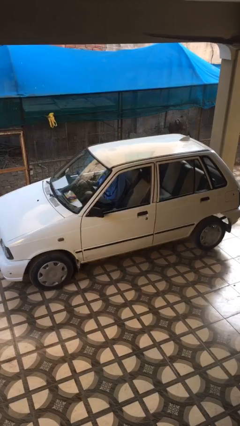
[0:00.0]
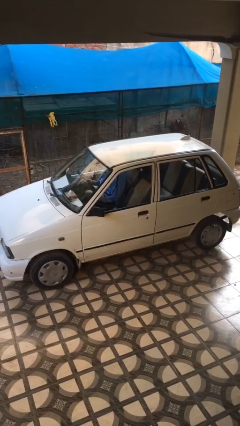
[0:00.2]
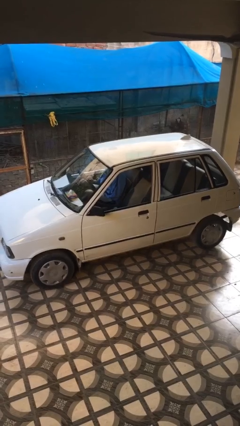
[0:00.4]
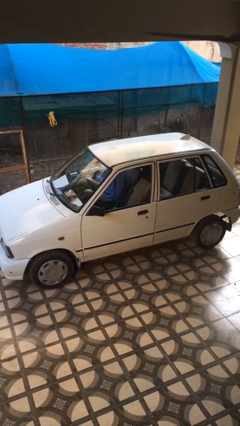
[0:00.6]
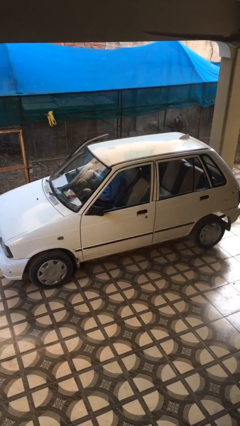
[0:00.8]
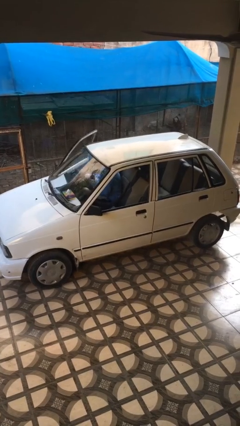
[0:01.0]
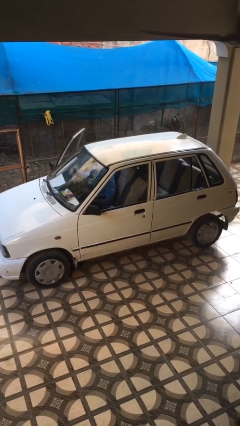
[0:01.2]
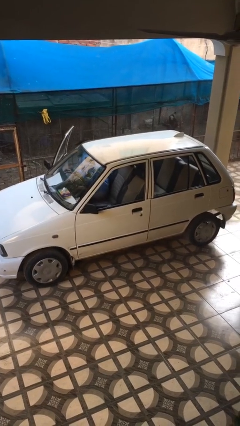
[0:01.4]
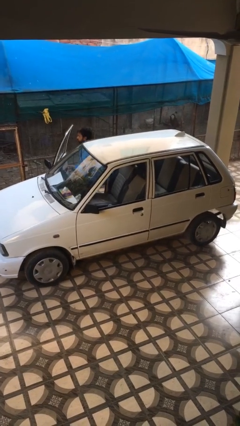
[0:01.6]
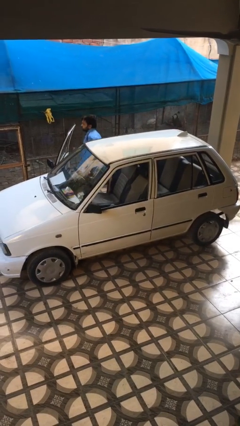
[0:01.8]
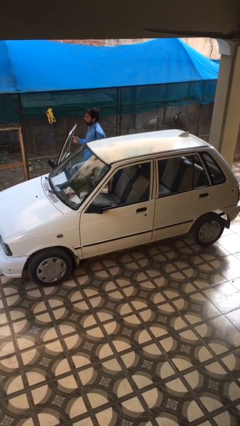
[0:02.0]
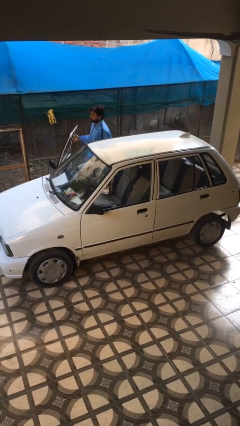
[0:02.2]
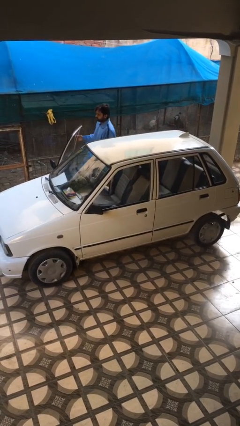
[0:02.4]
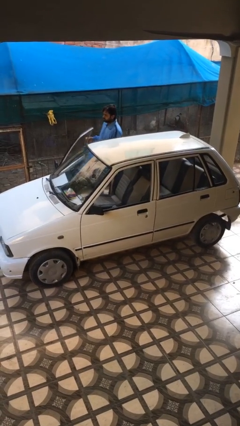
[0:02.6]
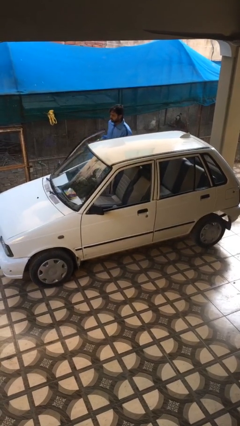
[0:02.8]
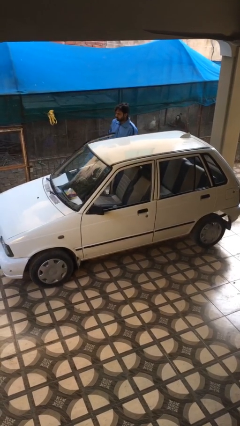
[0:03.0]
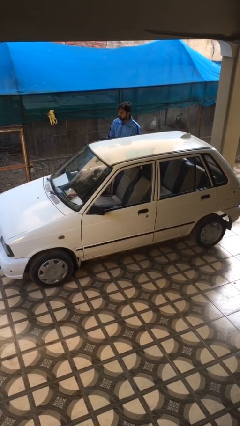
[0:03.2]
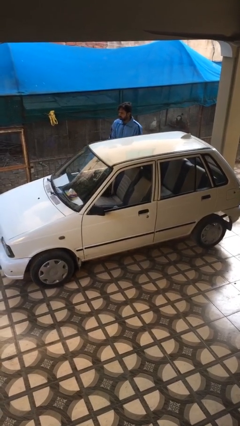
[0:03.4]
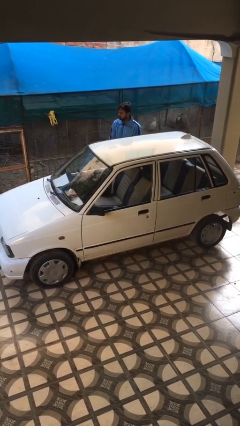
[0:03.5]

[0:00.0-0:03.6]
car drops off person

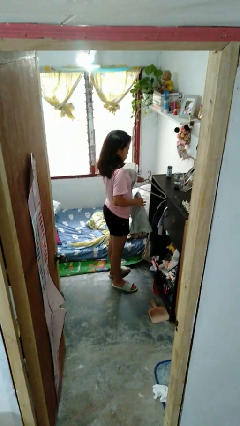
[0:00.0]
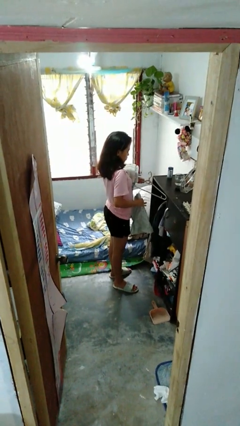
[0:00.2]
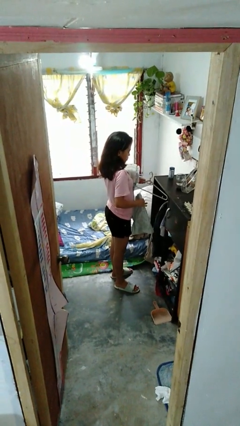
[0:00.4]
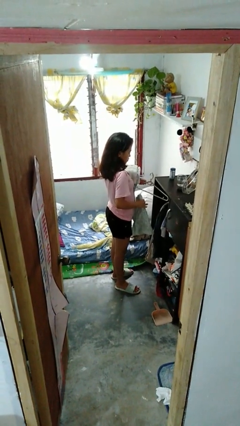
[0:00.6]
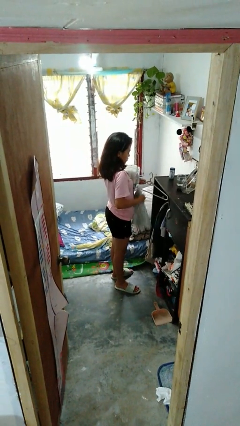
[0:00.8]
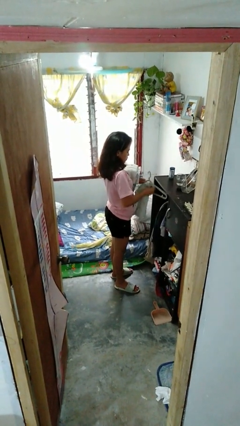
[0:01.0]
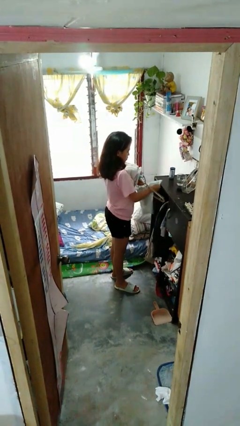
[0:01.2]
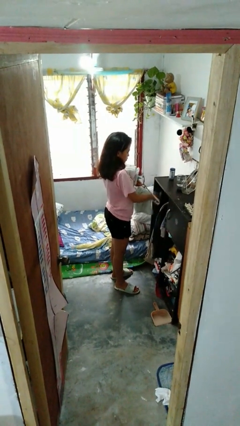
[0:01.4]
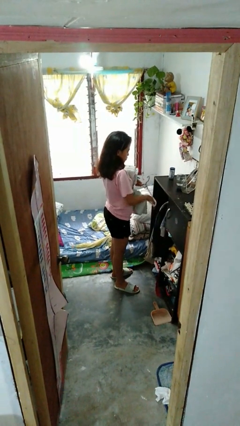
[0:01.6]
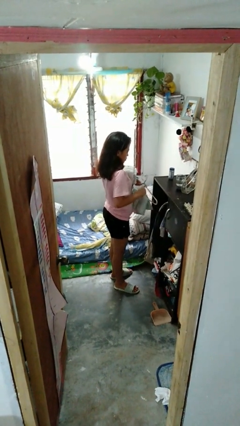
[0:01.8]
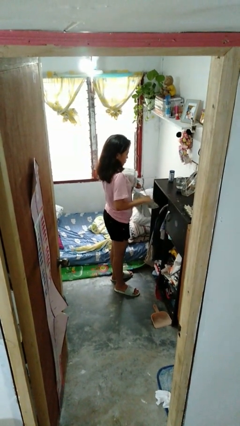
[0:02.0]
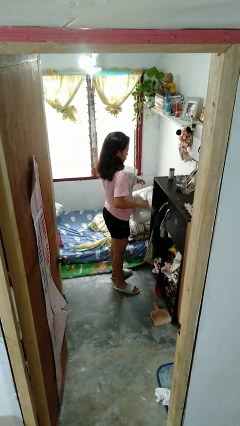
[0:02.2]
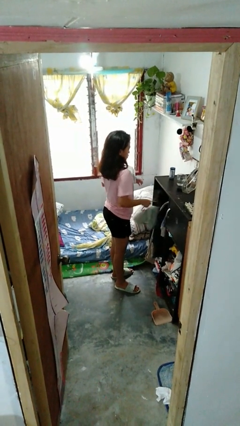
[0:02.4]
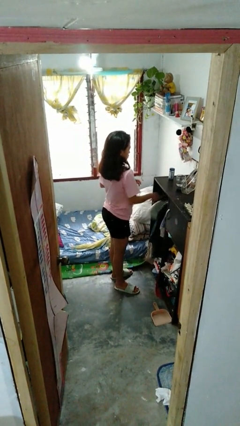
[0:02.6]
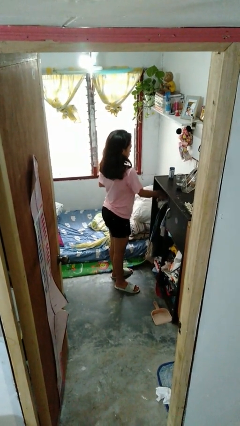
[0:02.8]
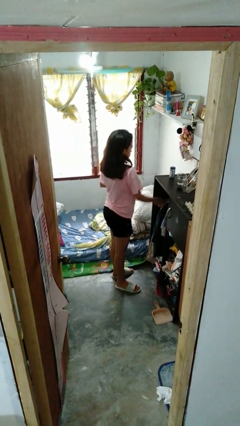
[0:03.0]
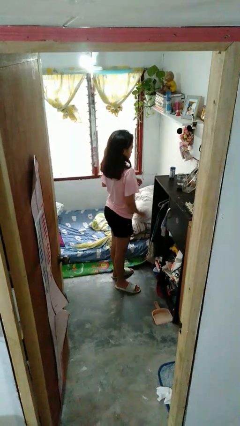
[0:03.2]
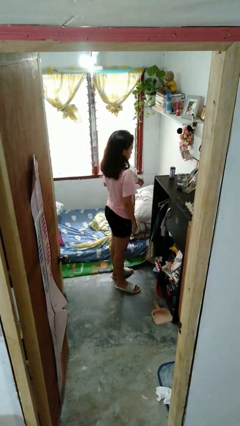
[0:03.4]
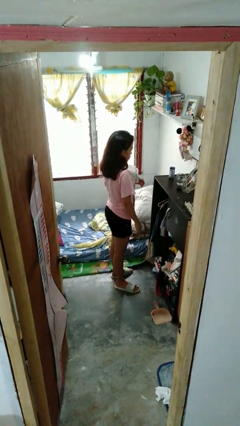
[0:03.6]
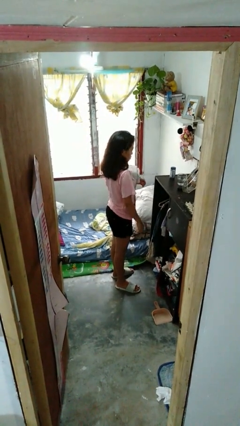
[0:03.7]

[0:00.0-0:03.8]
person puts clothes into closet

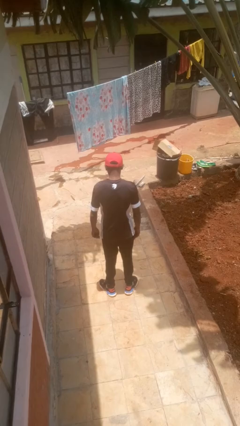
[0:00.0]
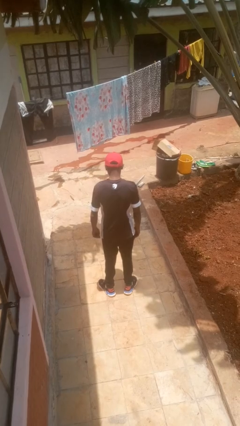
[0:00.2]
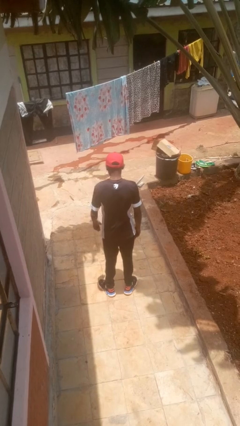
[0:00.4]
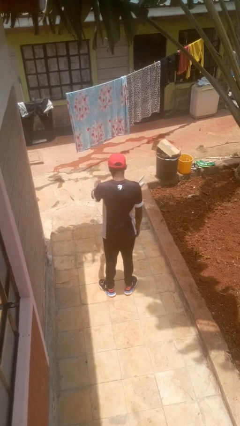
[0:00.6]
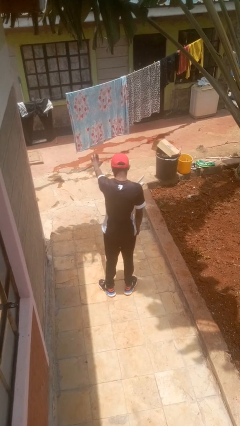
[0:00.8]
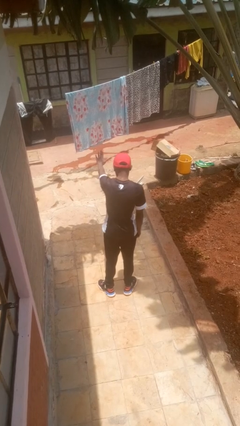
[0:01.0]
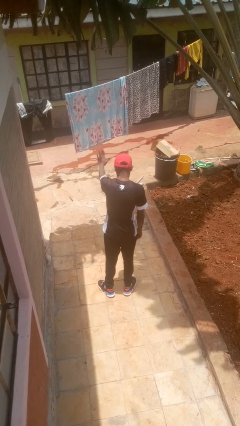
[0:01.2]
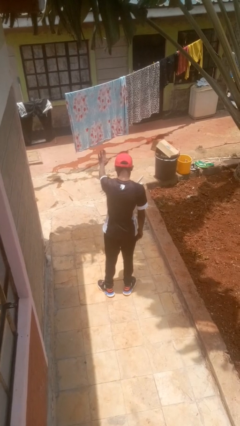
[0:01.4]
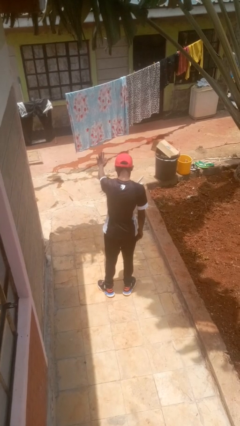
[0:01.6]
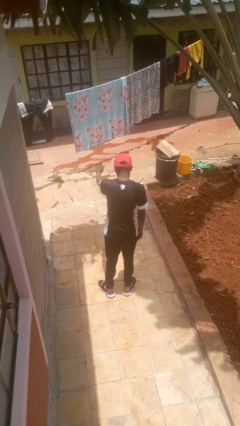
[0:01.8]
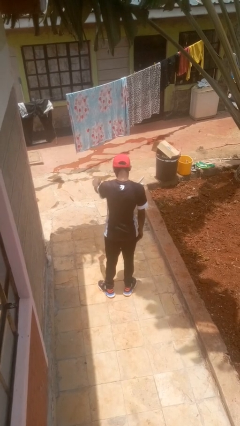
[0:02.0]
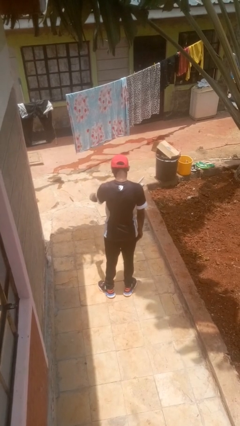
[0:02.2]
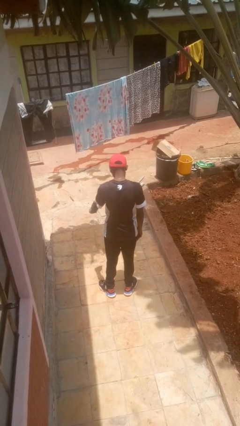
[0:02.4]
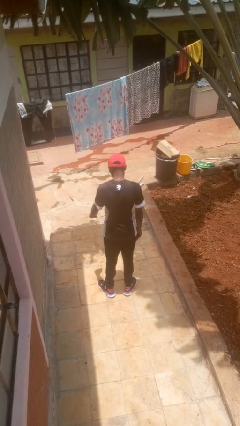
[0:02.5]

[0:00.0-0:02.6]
person gestures stop

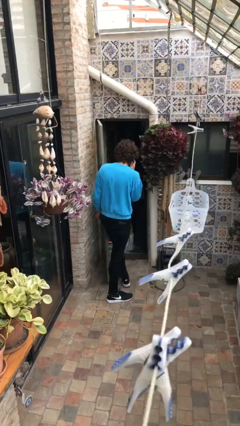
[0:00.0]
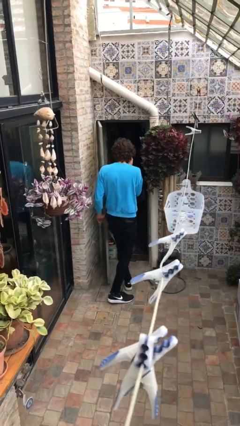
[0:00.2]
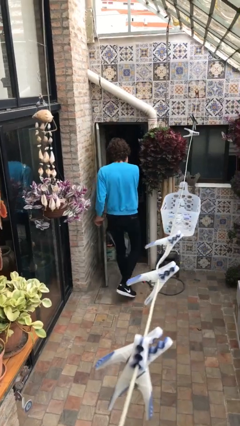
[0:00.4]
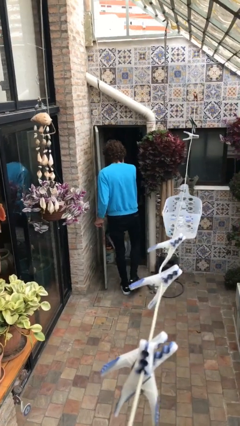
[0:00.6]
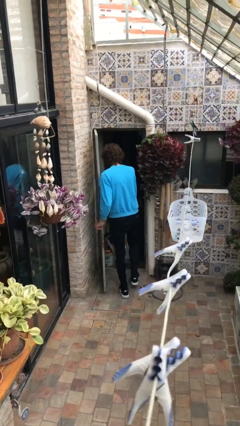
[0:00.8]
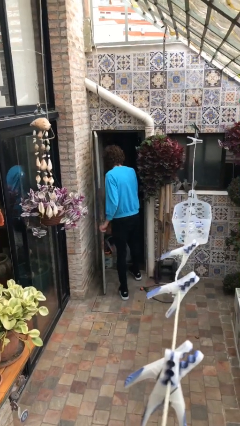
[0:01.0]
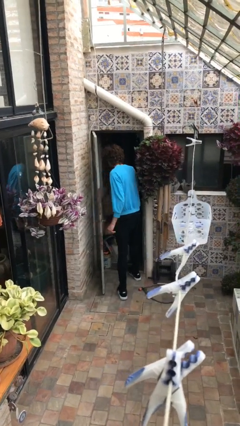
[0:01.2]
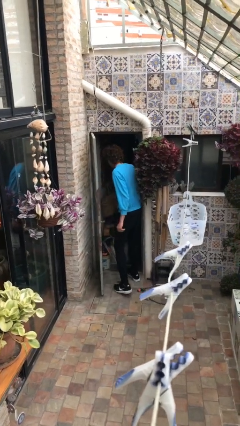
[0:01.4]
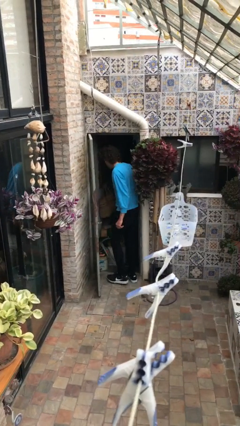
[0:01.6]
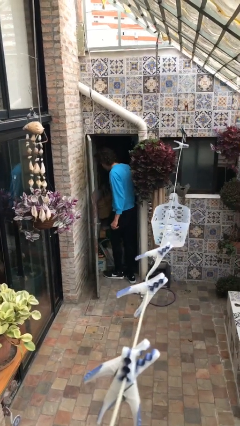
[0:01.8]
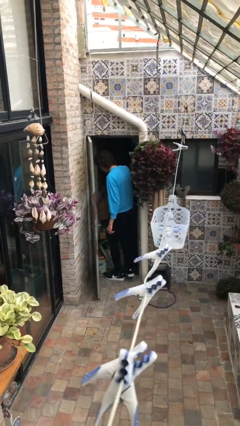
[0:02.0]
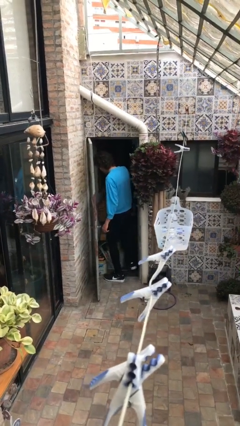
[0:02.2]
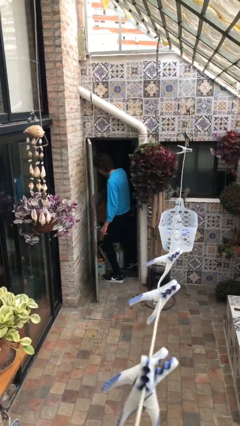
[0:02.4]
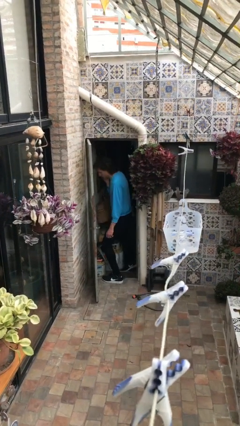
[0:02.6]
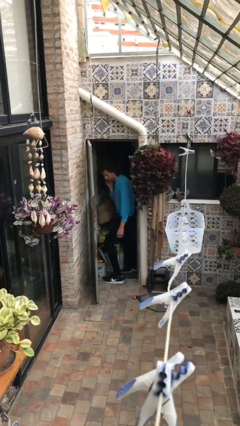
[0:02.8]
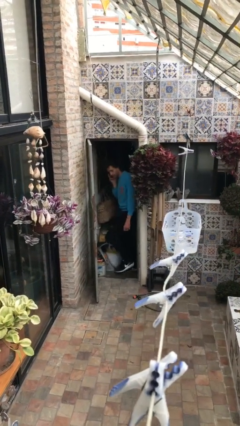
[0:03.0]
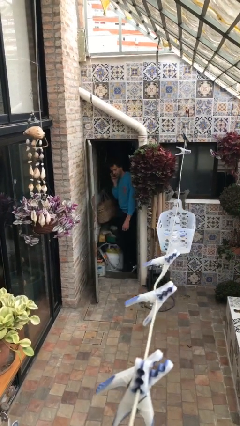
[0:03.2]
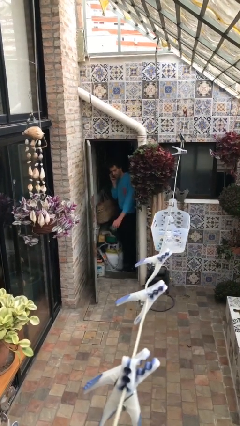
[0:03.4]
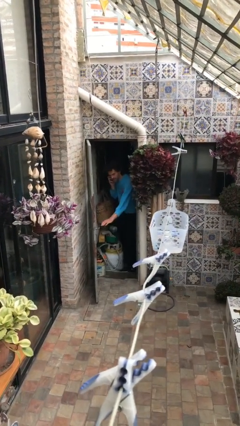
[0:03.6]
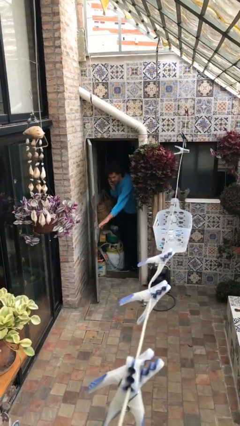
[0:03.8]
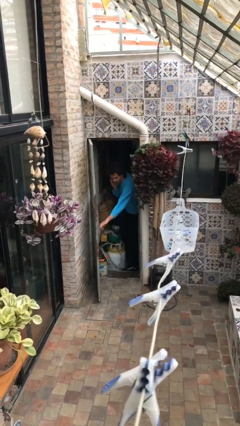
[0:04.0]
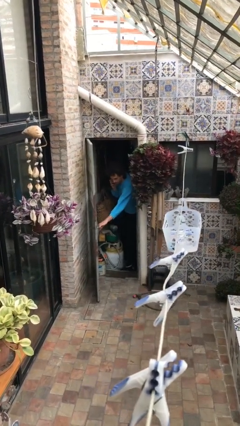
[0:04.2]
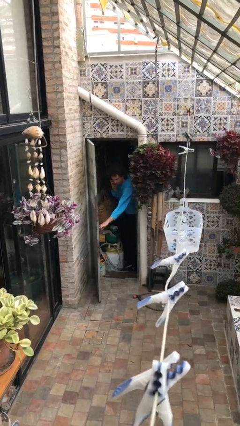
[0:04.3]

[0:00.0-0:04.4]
person exits scene through structure

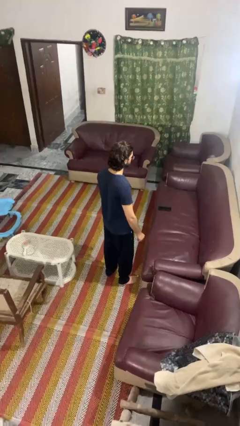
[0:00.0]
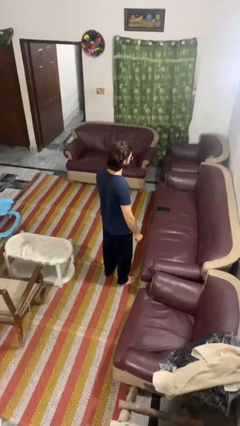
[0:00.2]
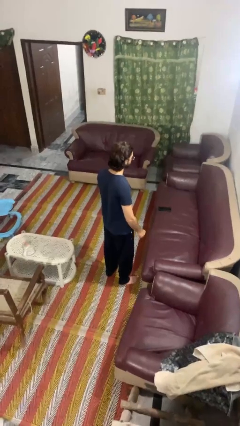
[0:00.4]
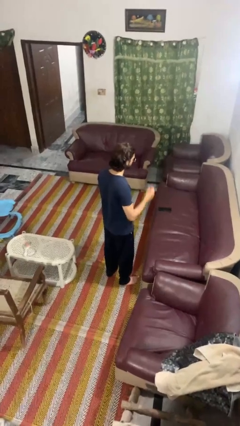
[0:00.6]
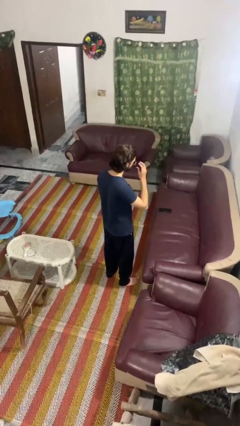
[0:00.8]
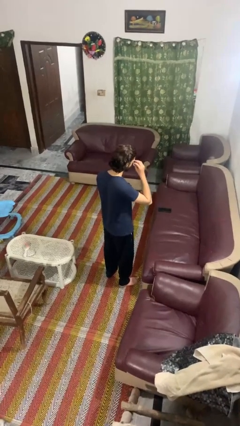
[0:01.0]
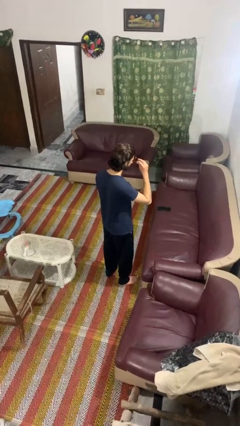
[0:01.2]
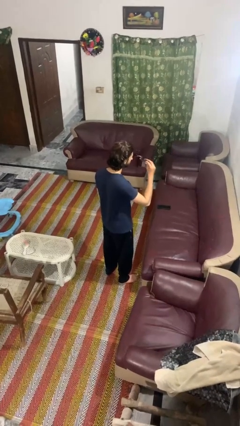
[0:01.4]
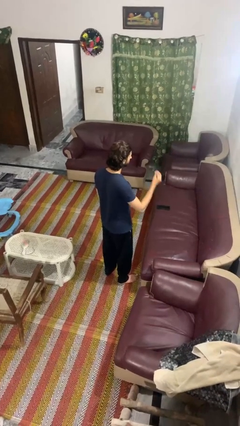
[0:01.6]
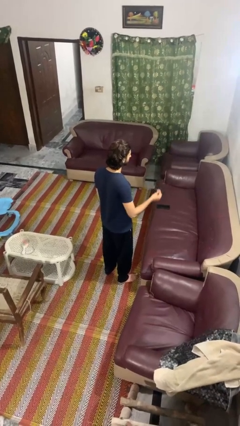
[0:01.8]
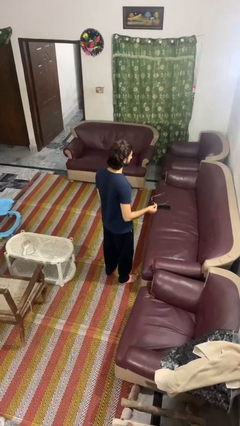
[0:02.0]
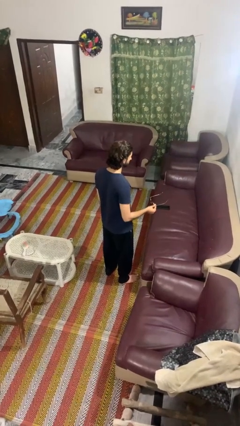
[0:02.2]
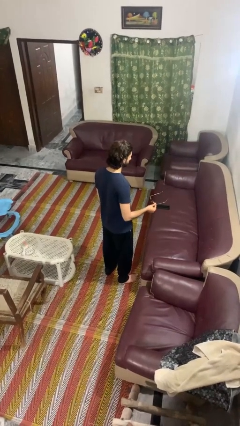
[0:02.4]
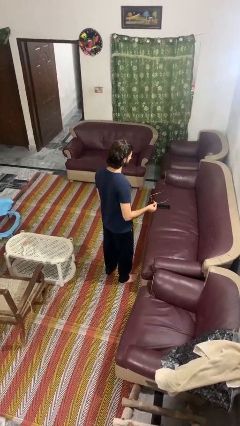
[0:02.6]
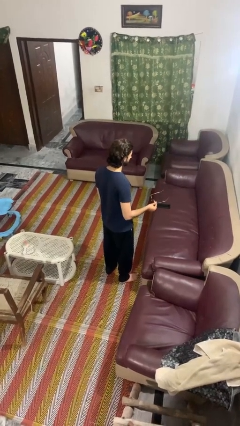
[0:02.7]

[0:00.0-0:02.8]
person takes off sunglasses

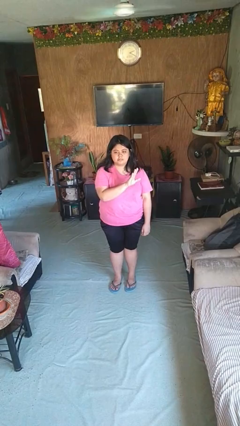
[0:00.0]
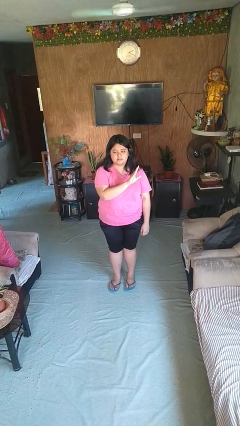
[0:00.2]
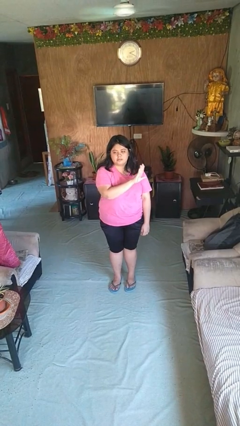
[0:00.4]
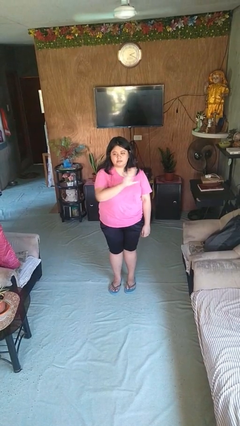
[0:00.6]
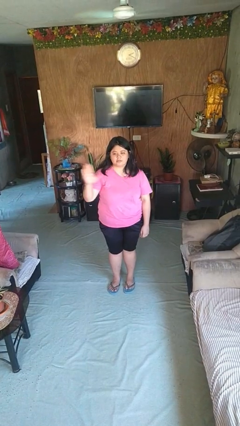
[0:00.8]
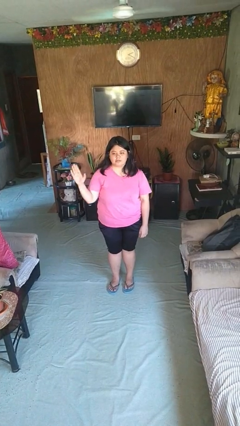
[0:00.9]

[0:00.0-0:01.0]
person gestures swipe right
